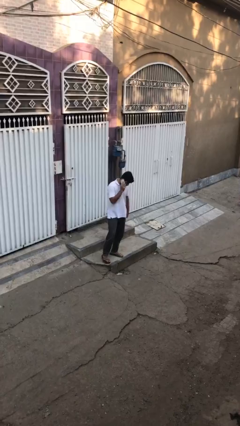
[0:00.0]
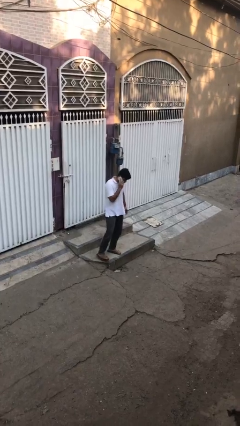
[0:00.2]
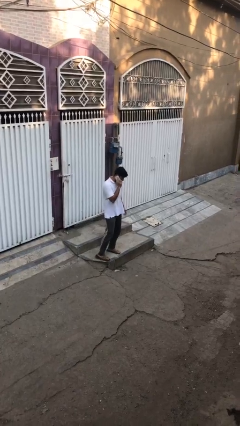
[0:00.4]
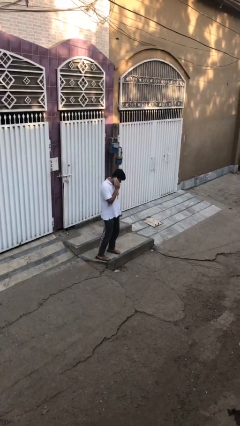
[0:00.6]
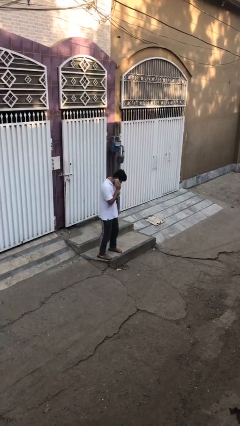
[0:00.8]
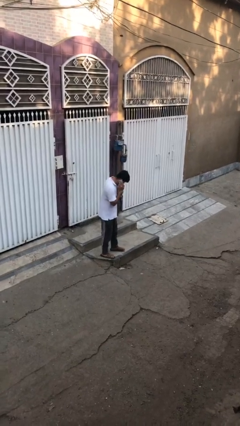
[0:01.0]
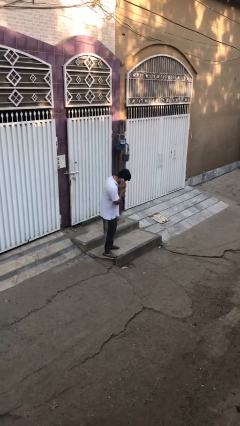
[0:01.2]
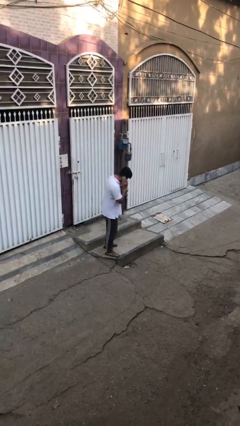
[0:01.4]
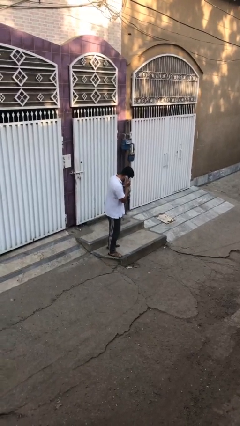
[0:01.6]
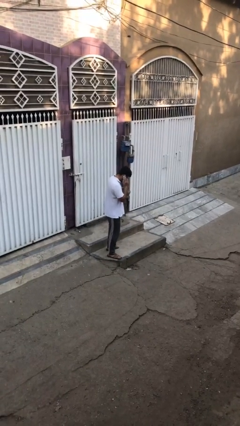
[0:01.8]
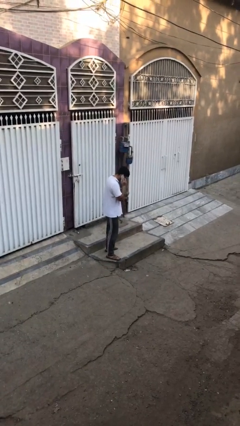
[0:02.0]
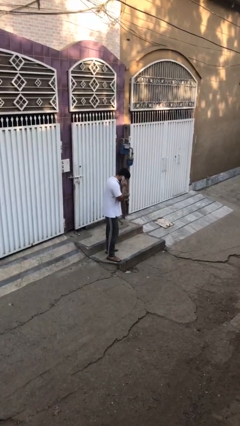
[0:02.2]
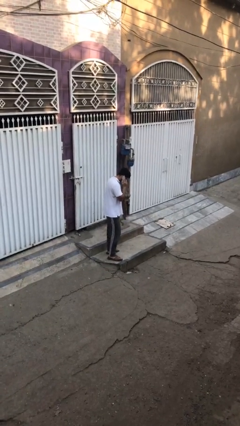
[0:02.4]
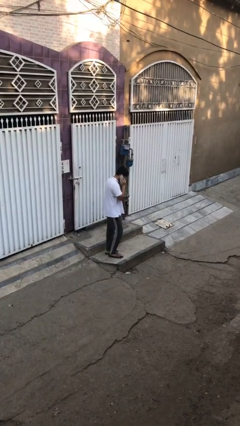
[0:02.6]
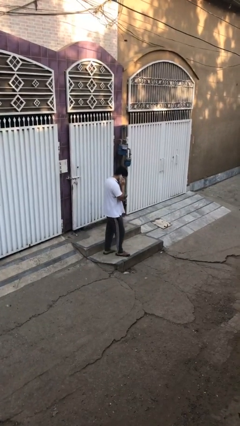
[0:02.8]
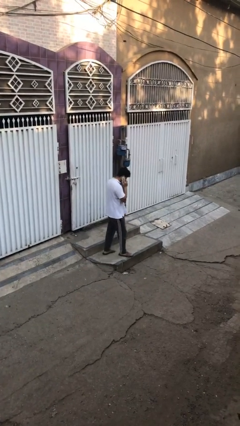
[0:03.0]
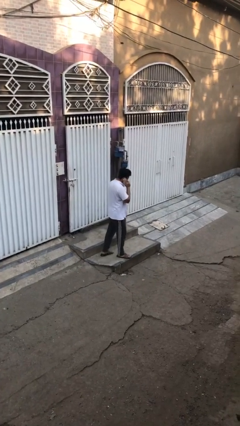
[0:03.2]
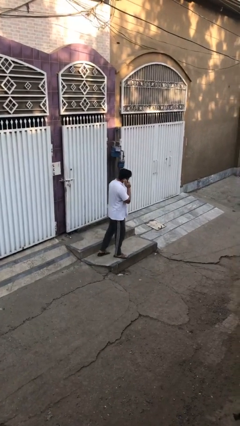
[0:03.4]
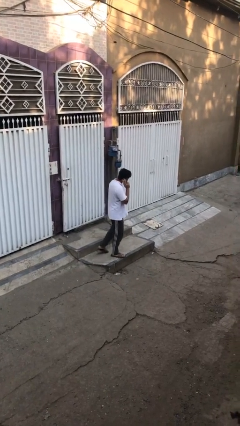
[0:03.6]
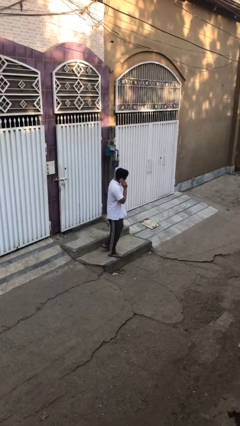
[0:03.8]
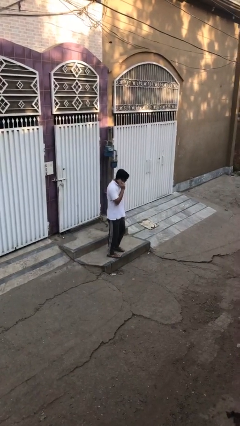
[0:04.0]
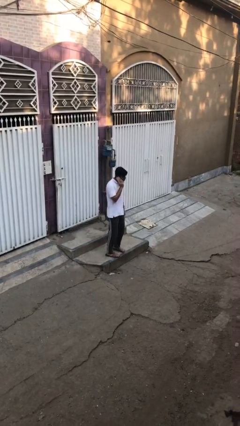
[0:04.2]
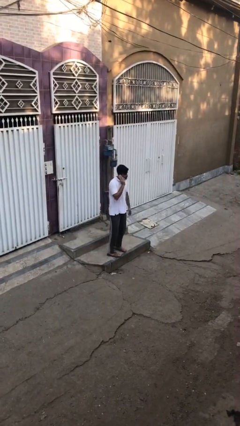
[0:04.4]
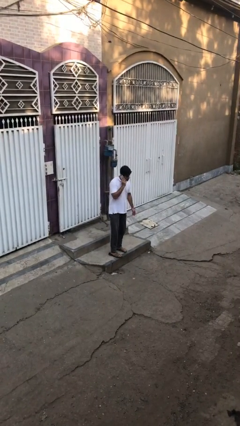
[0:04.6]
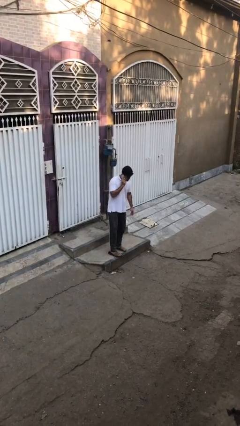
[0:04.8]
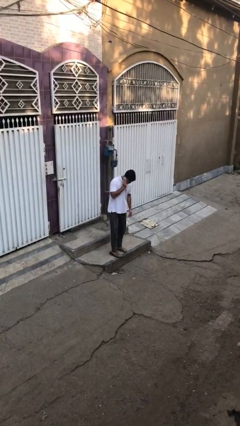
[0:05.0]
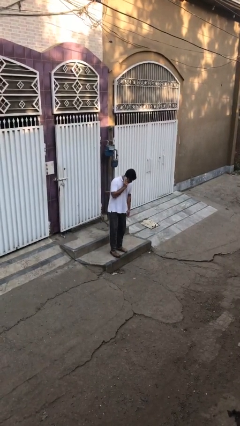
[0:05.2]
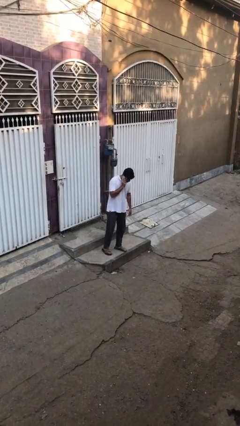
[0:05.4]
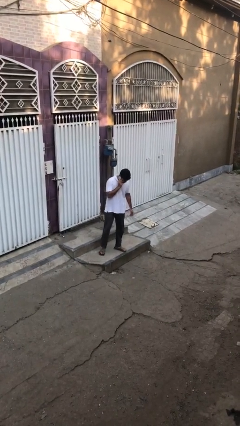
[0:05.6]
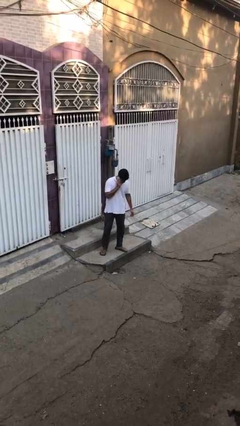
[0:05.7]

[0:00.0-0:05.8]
person talks on phone

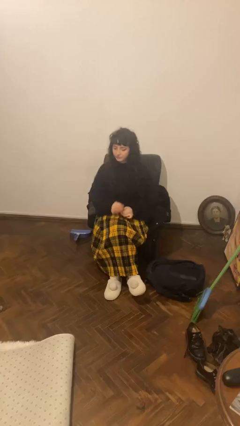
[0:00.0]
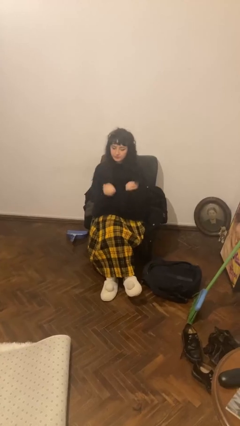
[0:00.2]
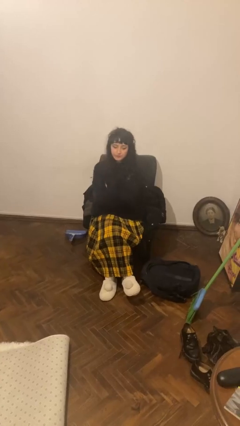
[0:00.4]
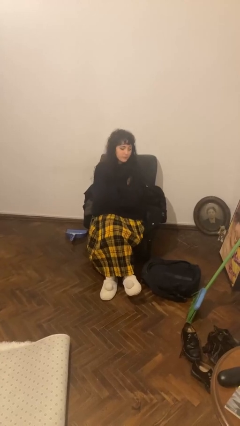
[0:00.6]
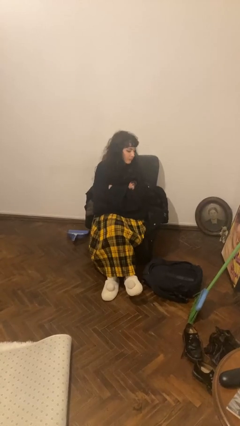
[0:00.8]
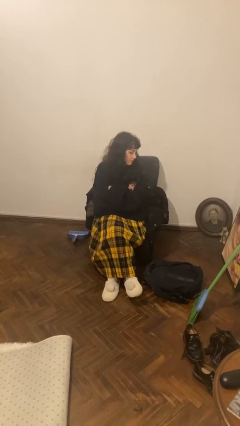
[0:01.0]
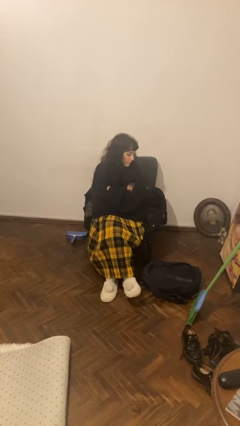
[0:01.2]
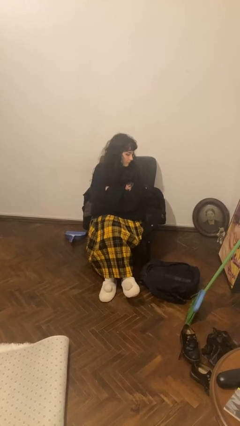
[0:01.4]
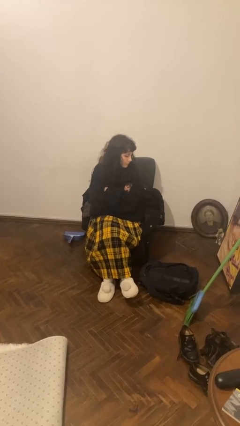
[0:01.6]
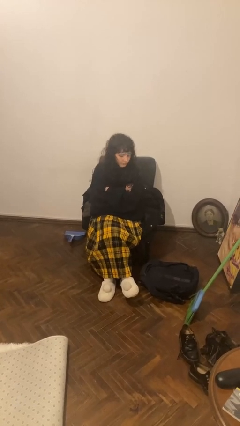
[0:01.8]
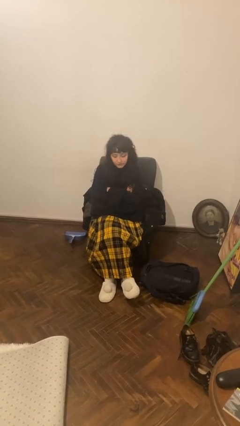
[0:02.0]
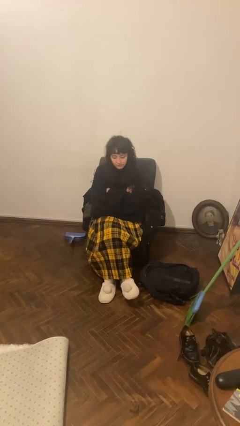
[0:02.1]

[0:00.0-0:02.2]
person crosses arms

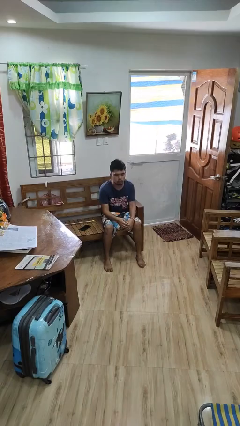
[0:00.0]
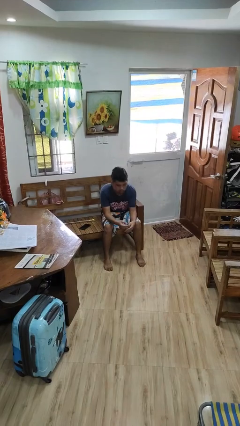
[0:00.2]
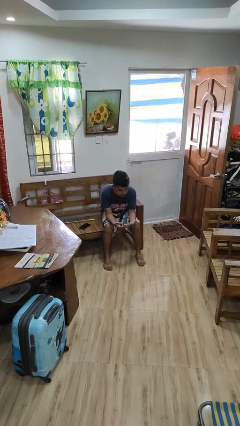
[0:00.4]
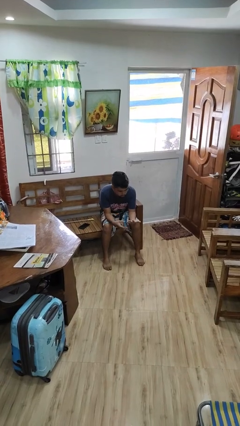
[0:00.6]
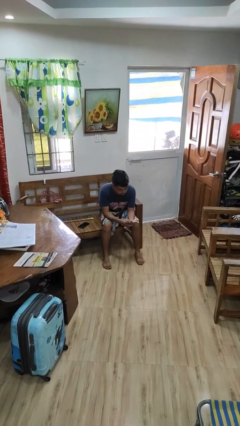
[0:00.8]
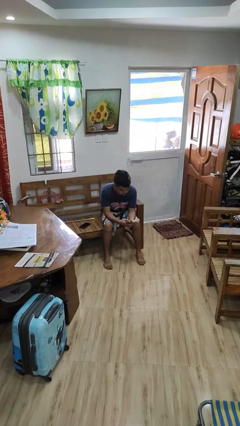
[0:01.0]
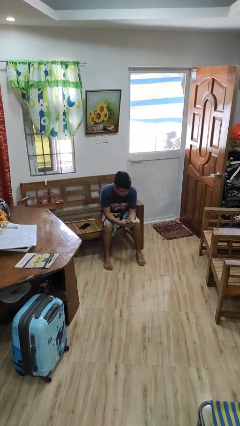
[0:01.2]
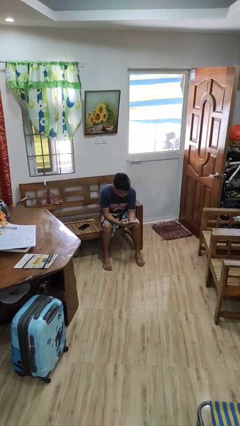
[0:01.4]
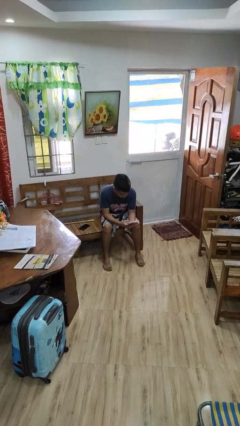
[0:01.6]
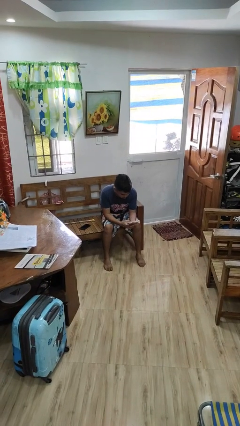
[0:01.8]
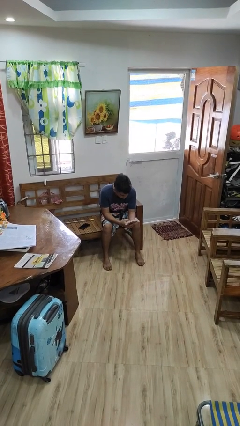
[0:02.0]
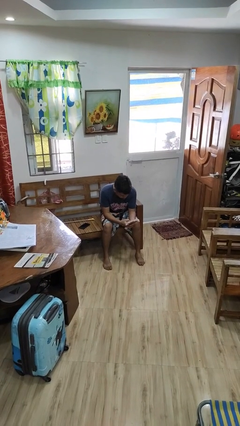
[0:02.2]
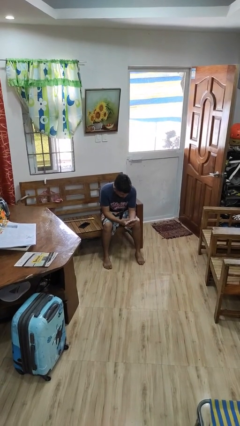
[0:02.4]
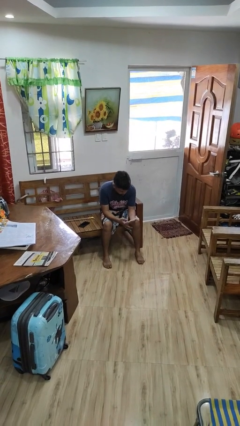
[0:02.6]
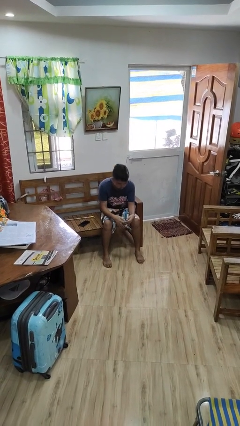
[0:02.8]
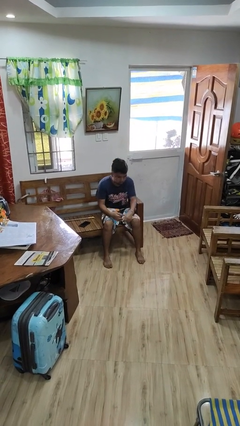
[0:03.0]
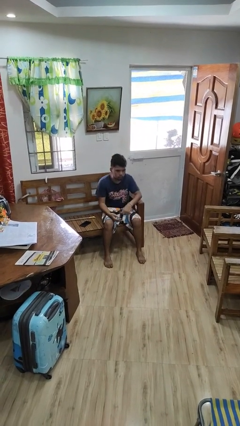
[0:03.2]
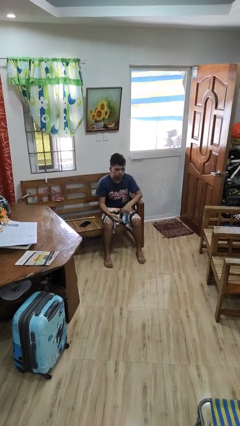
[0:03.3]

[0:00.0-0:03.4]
person looks at hands in lap

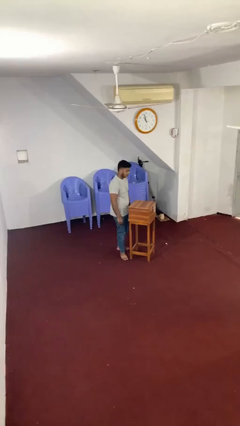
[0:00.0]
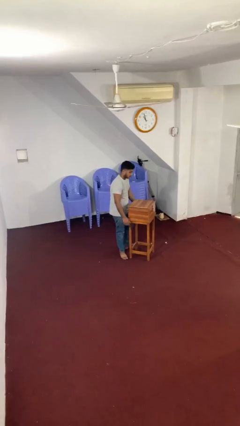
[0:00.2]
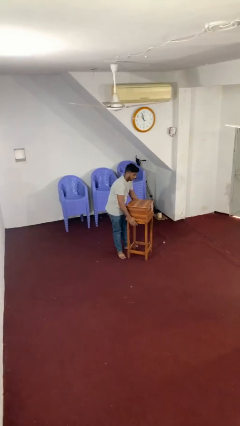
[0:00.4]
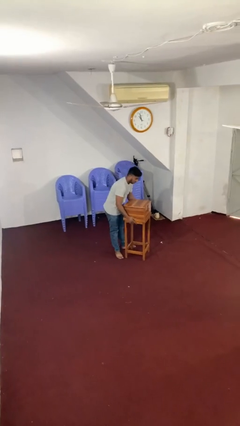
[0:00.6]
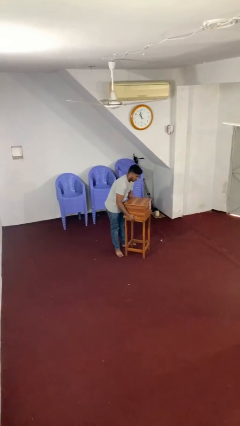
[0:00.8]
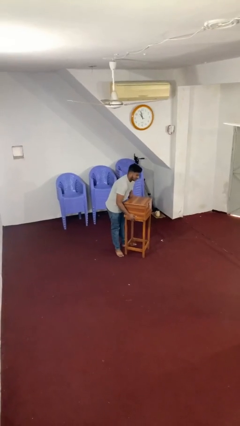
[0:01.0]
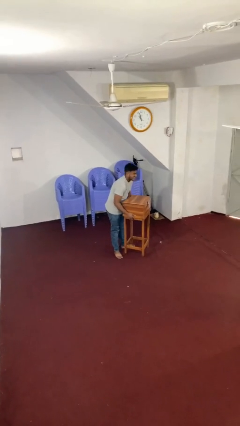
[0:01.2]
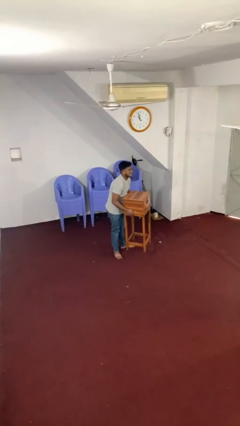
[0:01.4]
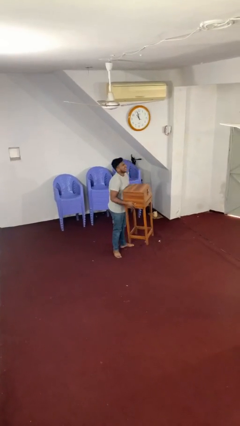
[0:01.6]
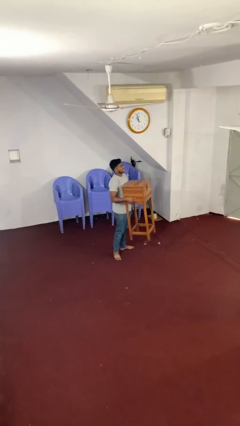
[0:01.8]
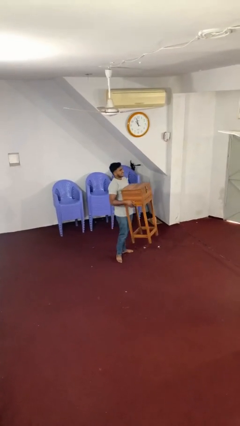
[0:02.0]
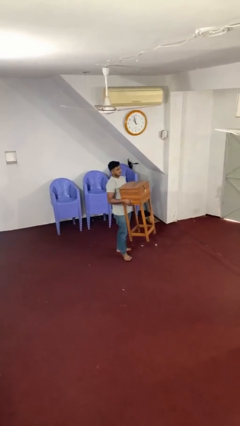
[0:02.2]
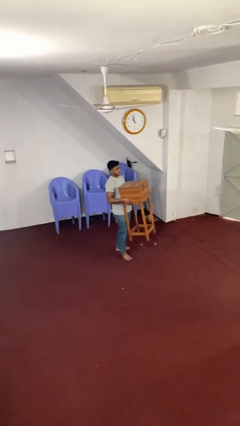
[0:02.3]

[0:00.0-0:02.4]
person picks up object from floor

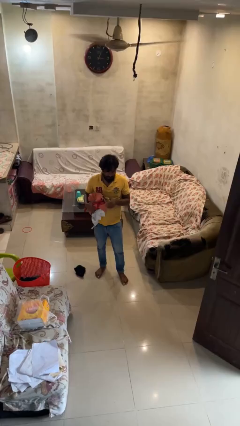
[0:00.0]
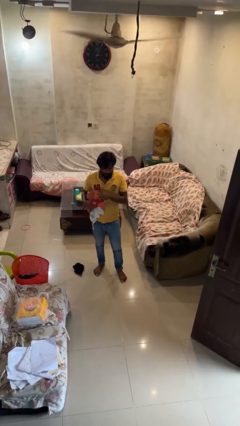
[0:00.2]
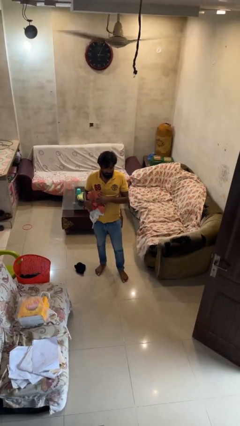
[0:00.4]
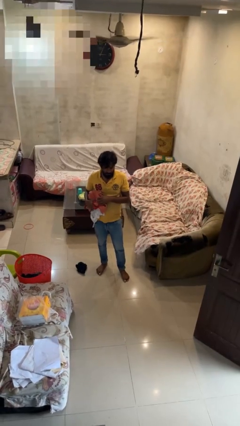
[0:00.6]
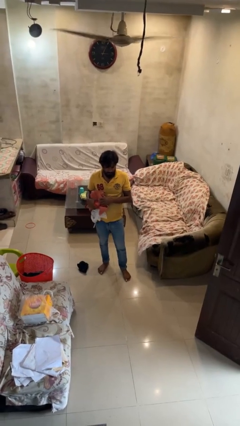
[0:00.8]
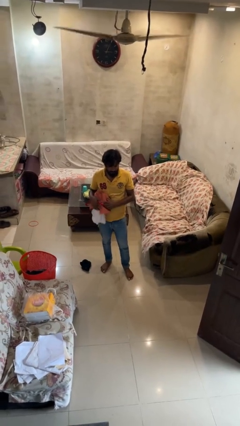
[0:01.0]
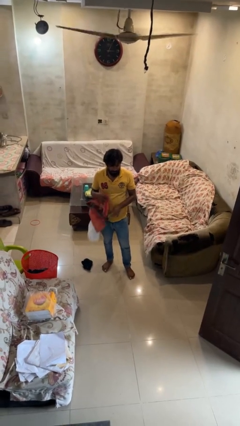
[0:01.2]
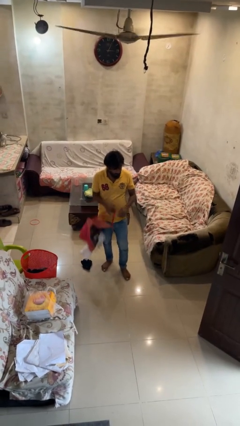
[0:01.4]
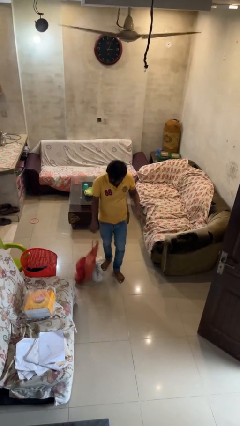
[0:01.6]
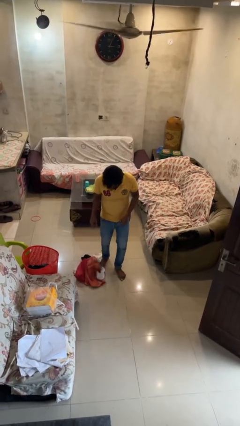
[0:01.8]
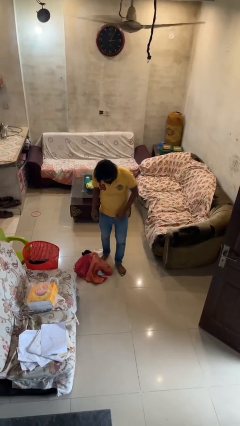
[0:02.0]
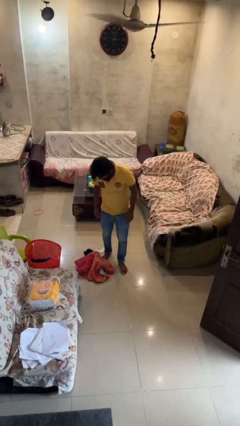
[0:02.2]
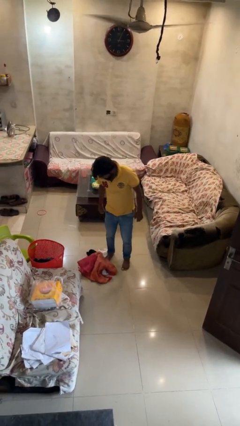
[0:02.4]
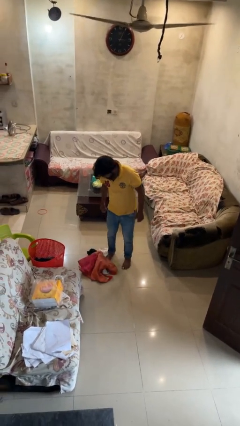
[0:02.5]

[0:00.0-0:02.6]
person drops object

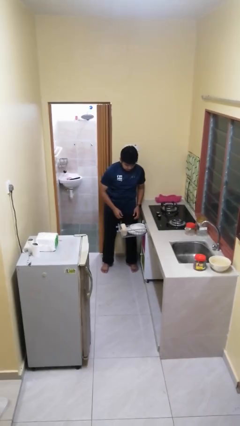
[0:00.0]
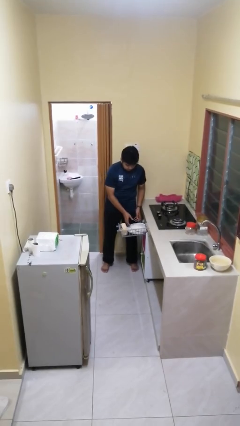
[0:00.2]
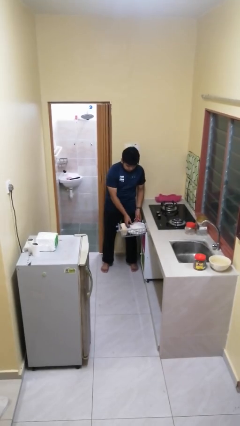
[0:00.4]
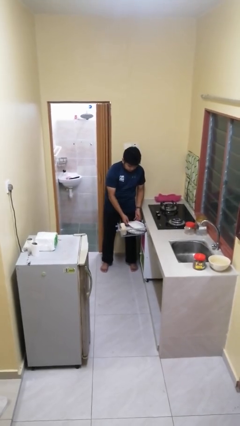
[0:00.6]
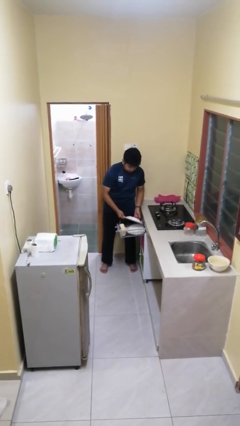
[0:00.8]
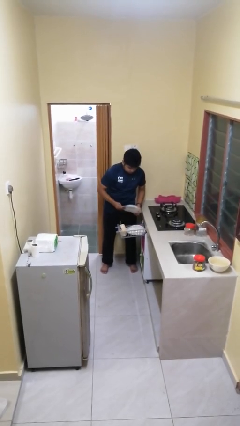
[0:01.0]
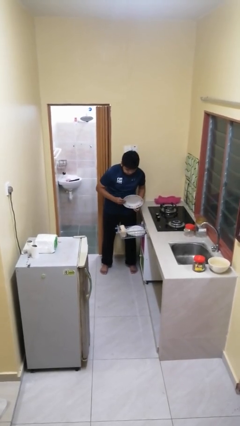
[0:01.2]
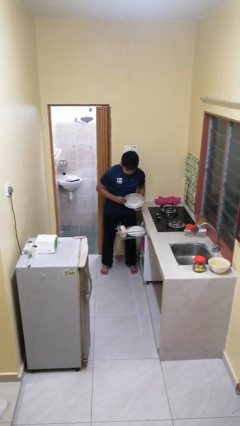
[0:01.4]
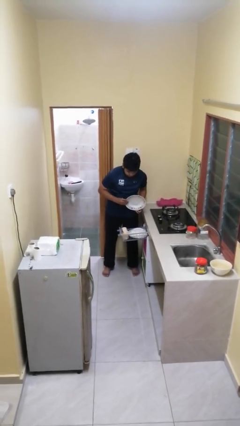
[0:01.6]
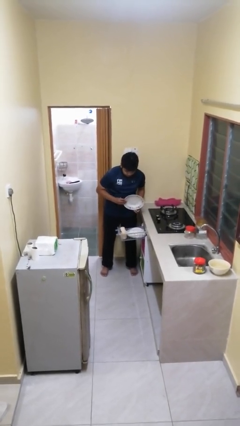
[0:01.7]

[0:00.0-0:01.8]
person takes object from kitchen drawer
